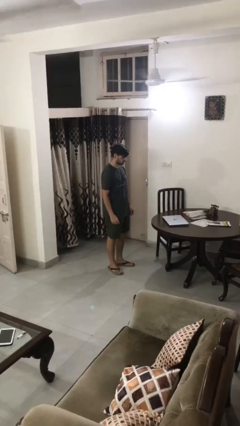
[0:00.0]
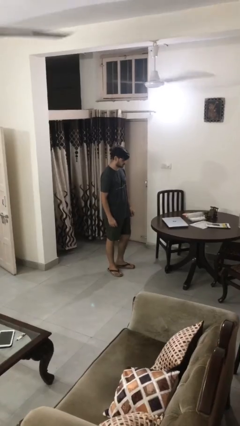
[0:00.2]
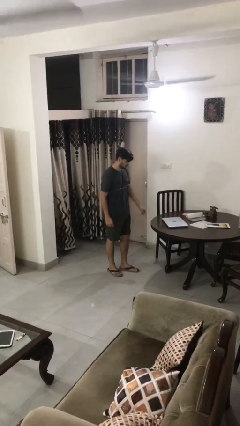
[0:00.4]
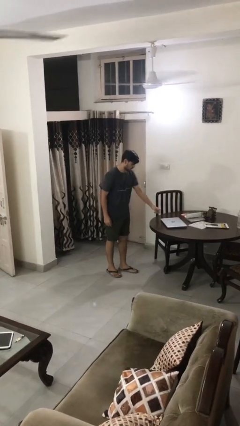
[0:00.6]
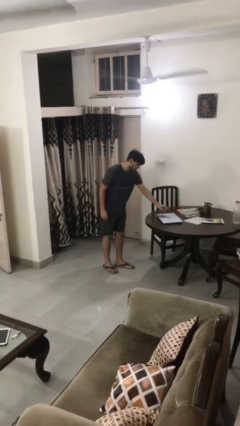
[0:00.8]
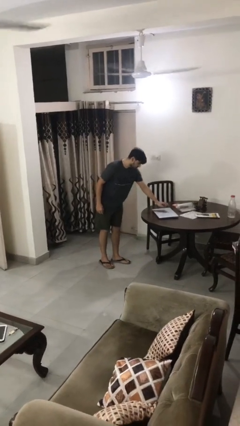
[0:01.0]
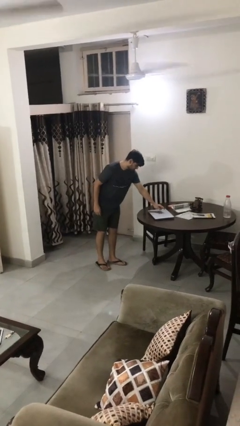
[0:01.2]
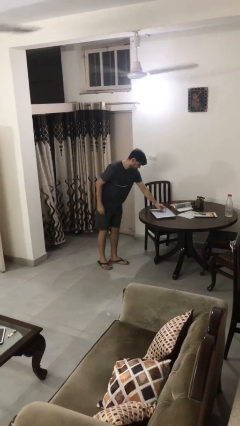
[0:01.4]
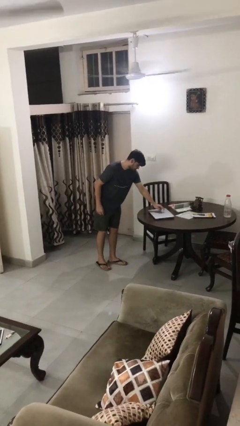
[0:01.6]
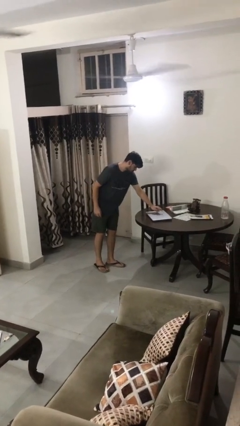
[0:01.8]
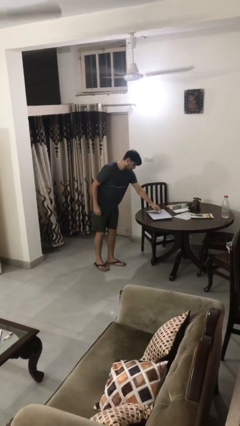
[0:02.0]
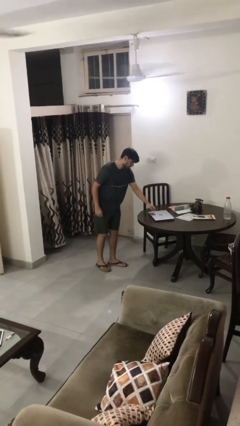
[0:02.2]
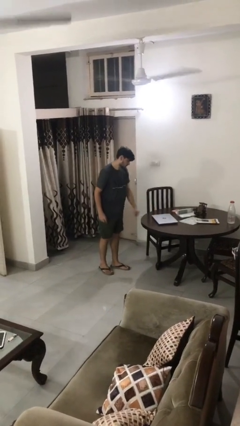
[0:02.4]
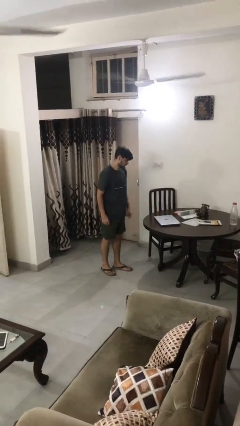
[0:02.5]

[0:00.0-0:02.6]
person taps object with finger

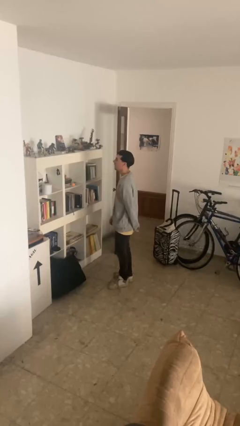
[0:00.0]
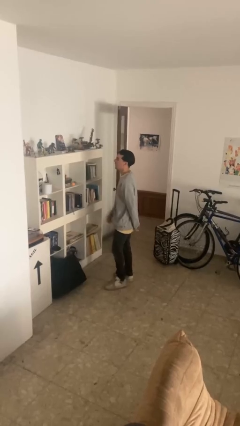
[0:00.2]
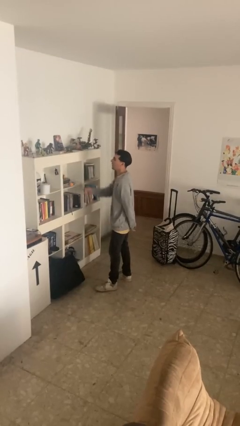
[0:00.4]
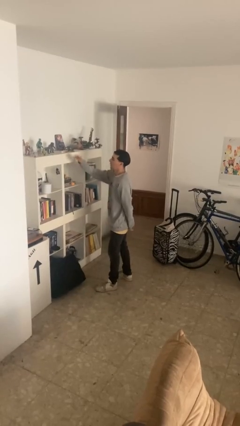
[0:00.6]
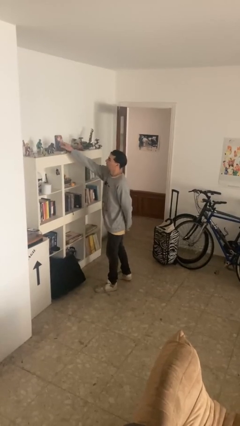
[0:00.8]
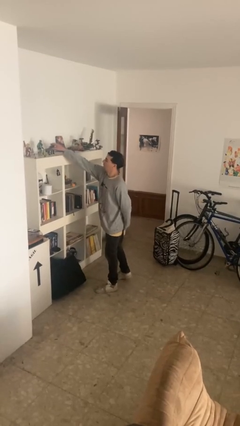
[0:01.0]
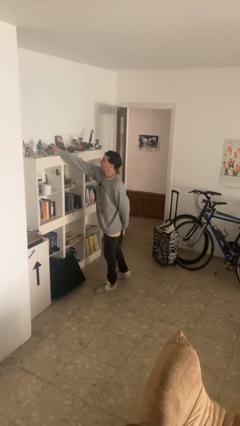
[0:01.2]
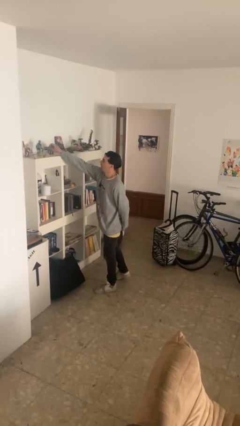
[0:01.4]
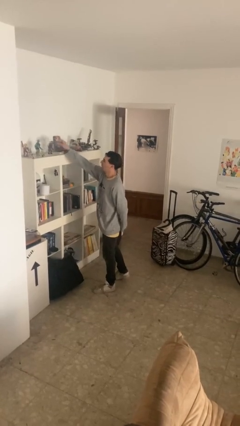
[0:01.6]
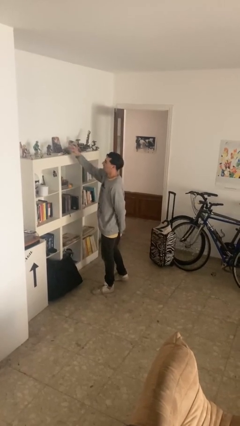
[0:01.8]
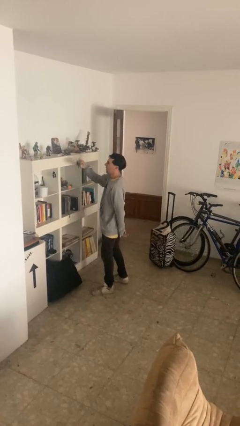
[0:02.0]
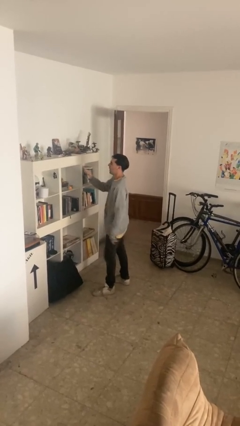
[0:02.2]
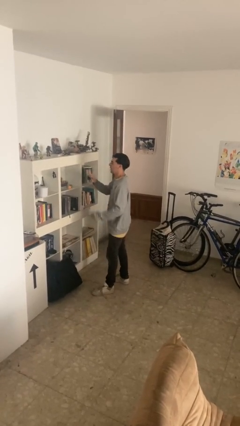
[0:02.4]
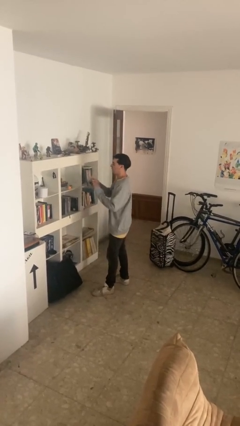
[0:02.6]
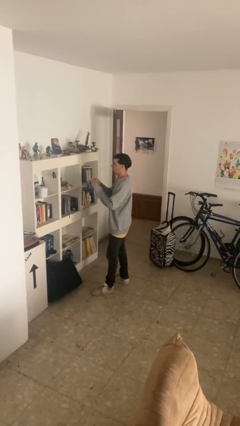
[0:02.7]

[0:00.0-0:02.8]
person picks up object from shelf

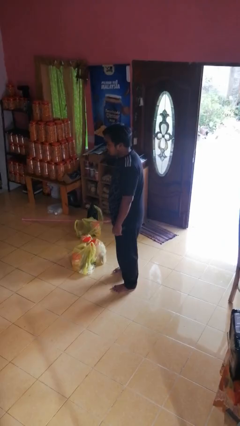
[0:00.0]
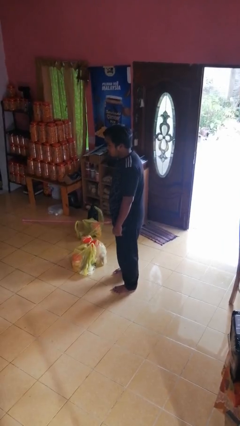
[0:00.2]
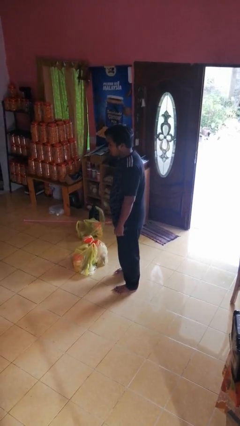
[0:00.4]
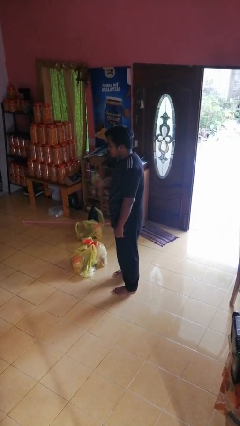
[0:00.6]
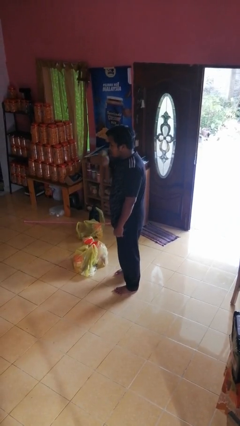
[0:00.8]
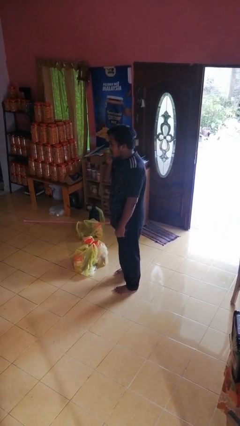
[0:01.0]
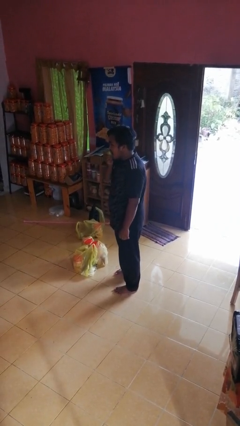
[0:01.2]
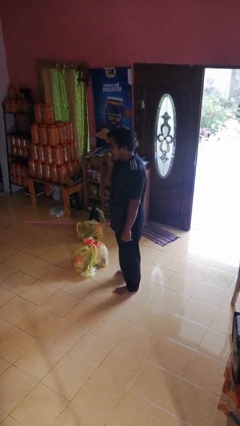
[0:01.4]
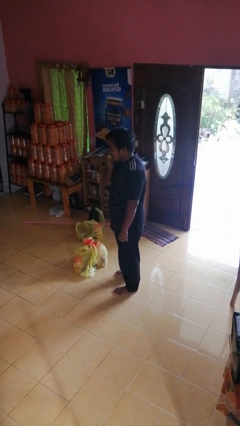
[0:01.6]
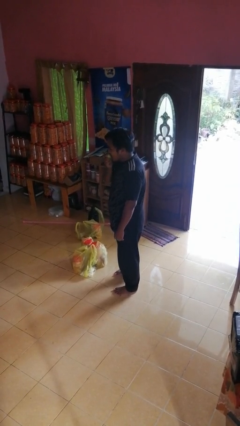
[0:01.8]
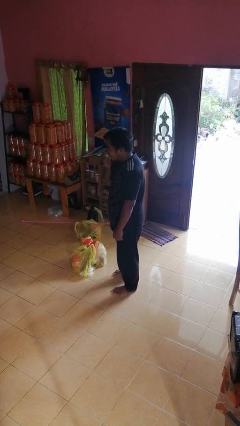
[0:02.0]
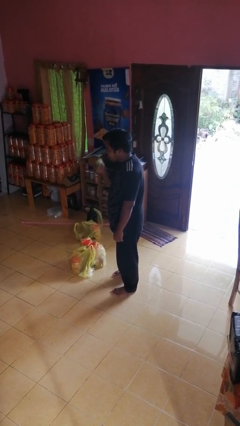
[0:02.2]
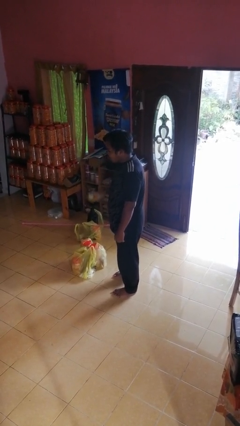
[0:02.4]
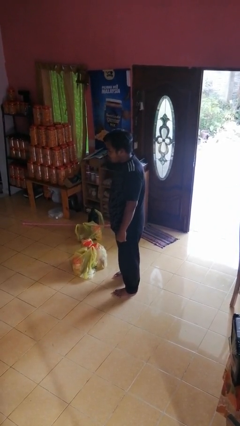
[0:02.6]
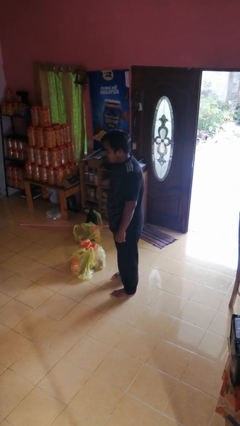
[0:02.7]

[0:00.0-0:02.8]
person eats apple

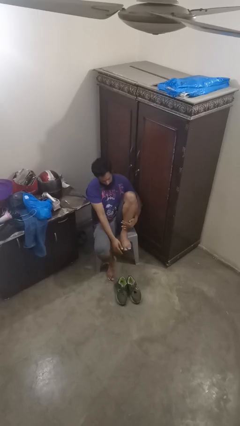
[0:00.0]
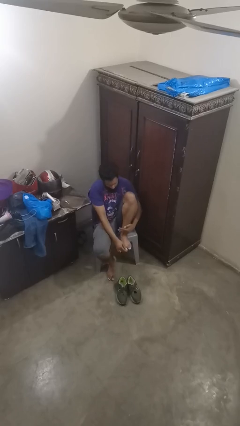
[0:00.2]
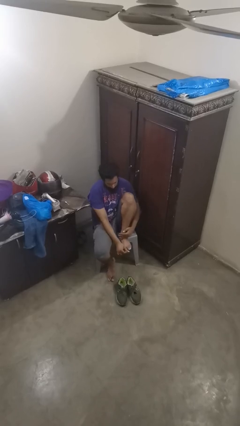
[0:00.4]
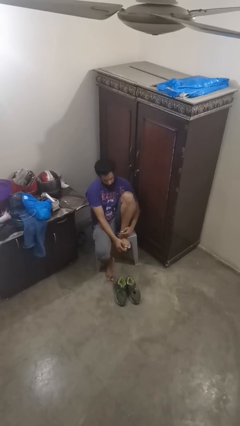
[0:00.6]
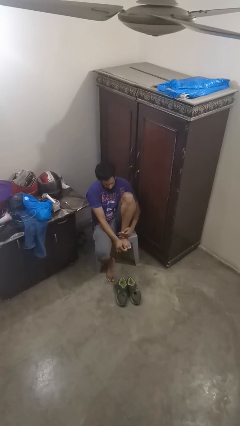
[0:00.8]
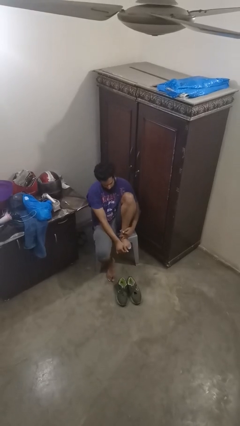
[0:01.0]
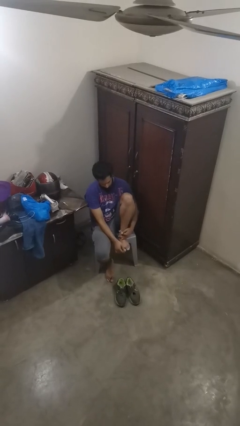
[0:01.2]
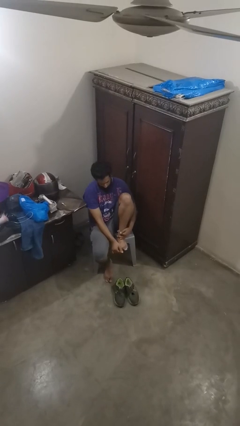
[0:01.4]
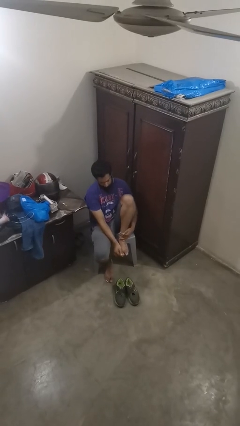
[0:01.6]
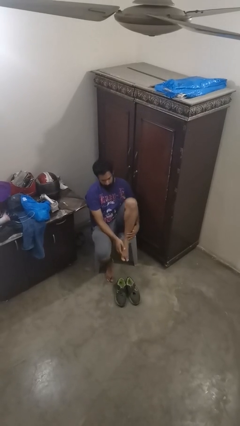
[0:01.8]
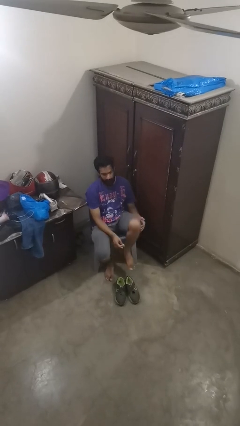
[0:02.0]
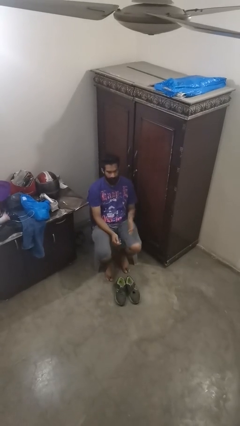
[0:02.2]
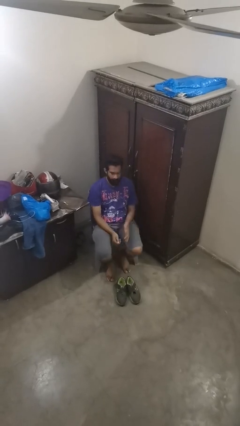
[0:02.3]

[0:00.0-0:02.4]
person rubs foot

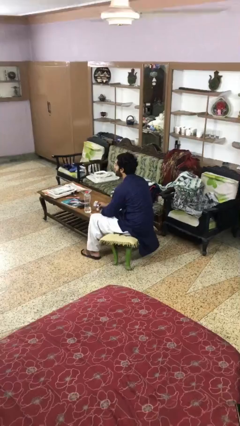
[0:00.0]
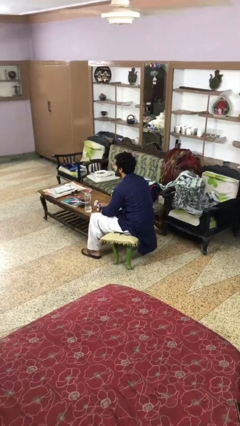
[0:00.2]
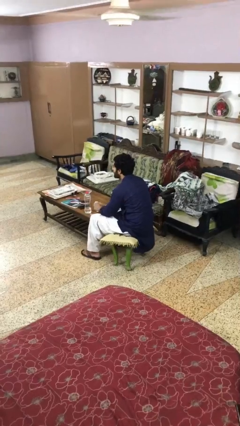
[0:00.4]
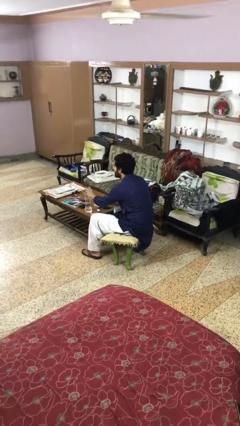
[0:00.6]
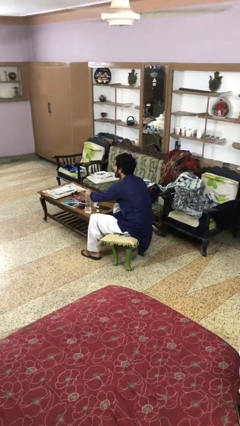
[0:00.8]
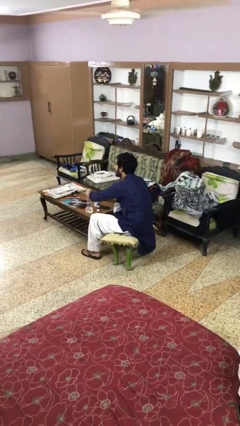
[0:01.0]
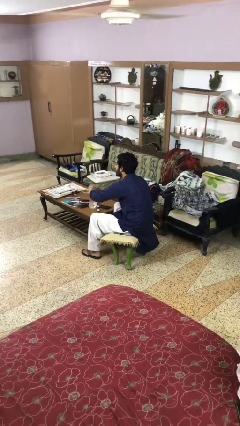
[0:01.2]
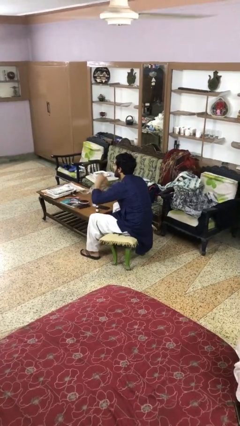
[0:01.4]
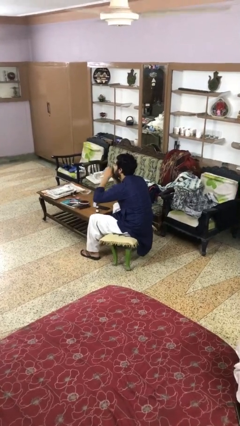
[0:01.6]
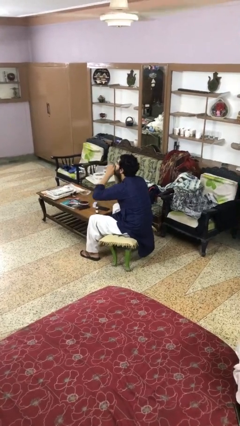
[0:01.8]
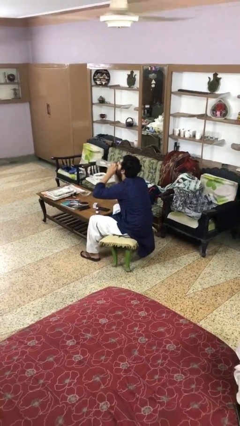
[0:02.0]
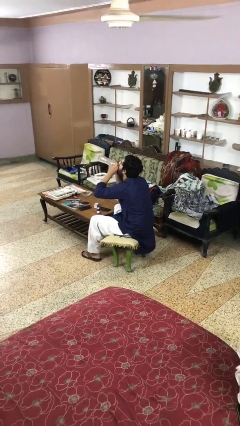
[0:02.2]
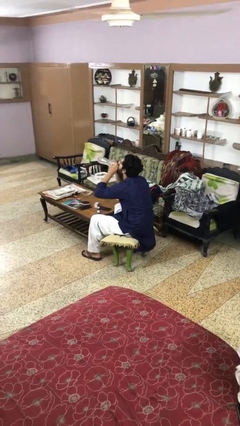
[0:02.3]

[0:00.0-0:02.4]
person drinks from cup

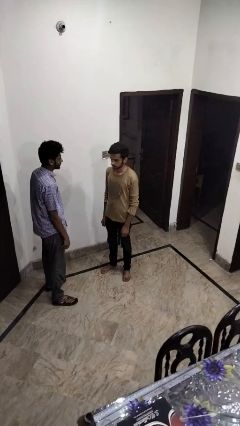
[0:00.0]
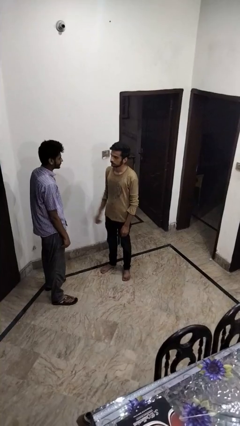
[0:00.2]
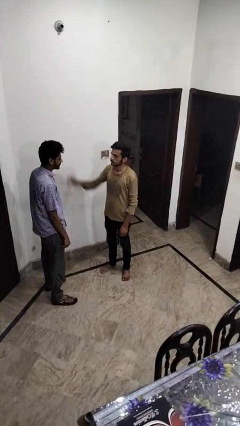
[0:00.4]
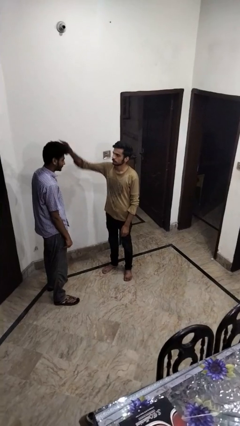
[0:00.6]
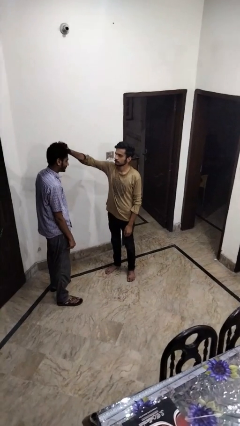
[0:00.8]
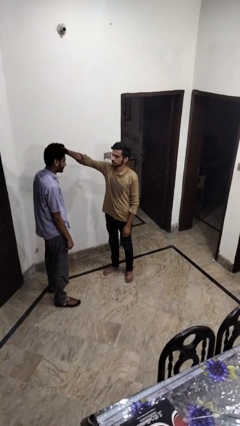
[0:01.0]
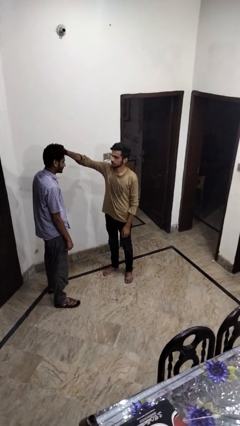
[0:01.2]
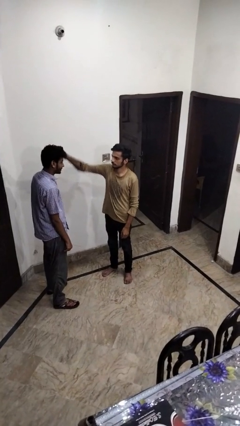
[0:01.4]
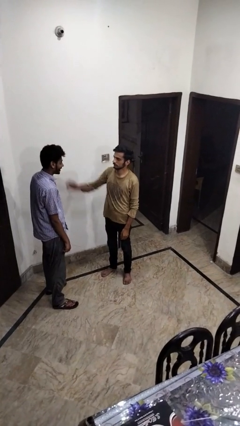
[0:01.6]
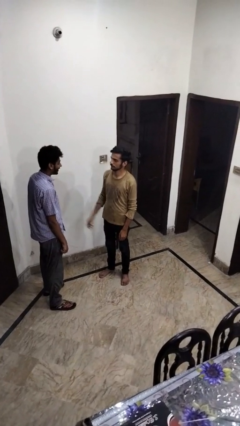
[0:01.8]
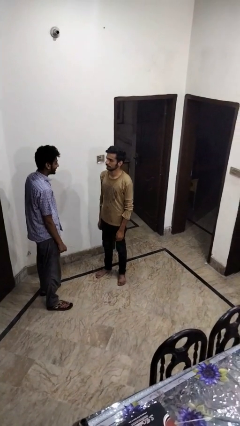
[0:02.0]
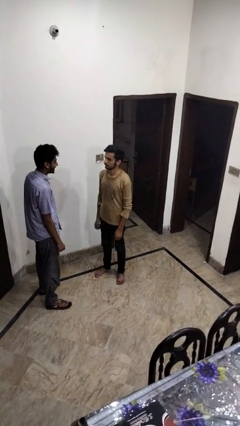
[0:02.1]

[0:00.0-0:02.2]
person grabs person by hair

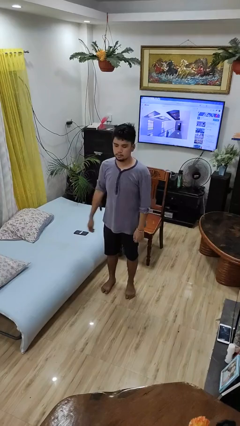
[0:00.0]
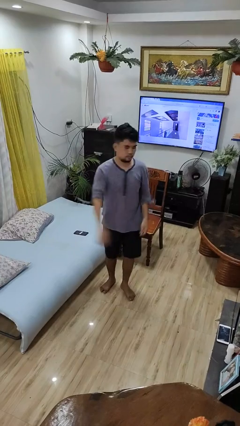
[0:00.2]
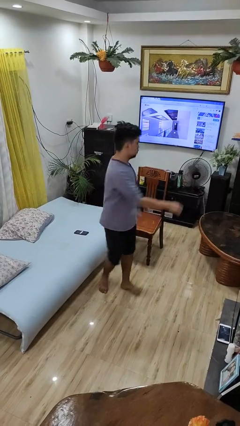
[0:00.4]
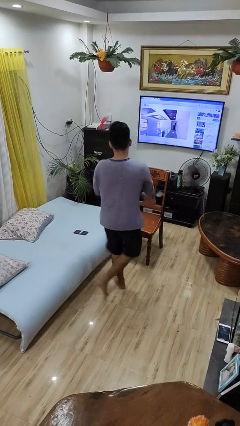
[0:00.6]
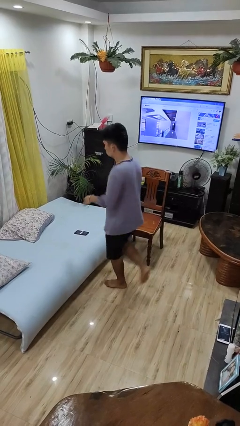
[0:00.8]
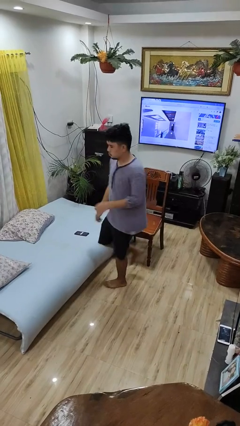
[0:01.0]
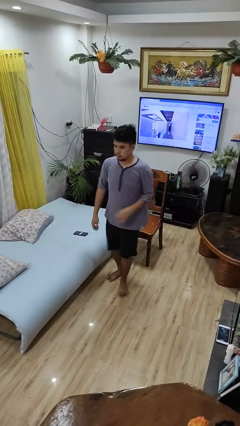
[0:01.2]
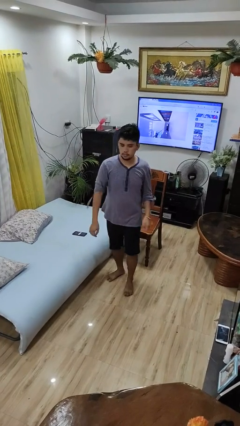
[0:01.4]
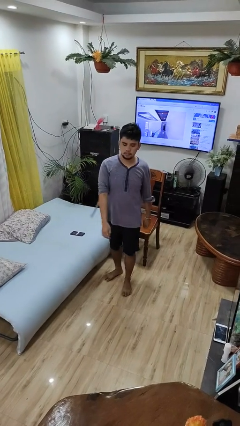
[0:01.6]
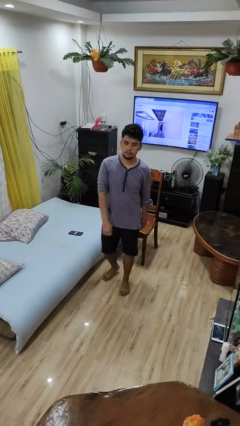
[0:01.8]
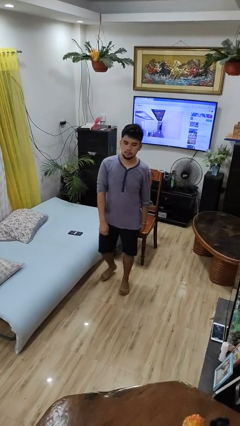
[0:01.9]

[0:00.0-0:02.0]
person twirls
